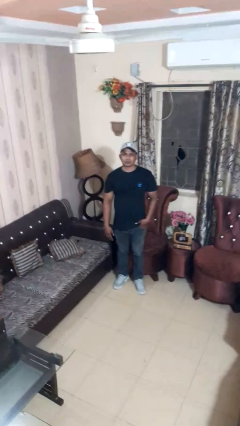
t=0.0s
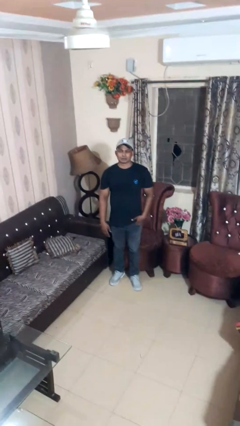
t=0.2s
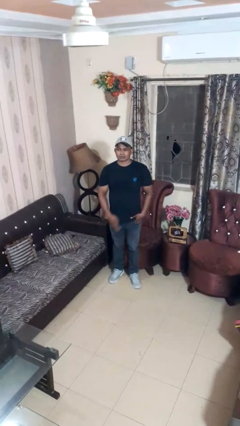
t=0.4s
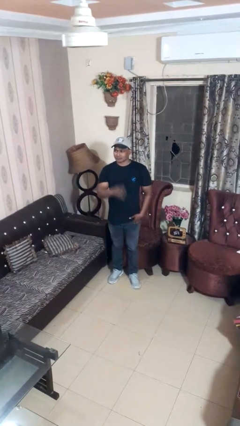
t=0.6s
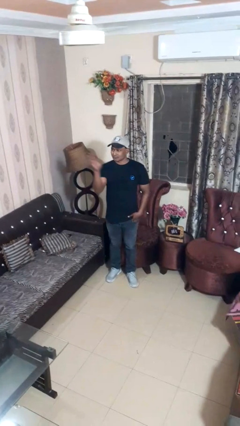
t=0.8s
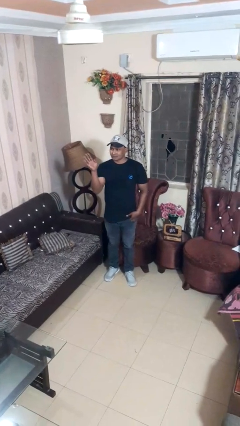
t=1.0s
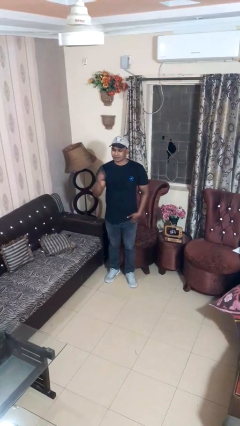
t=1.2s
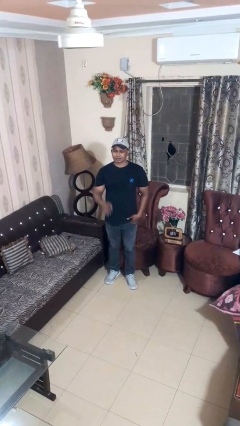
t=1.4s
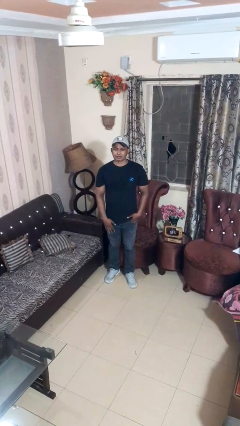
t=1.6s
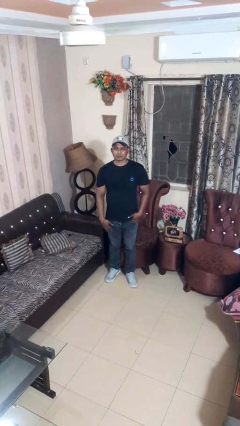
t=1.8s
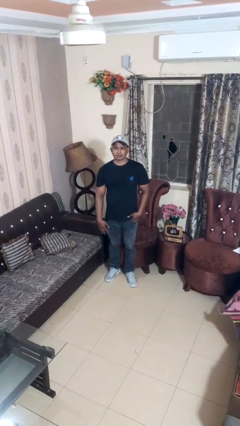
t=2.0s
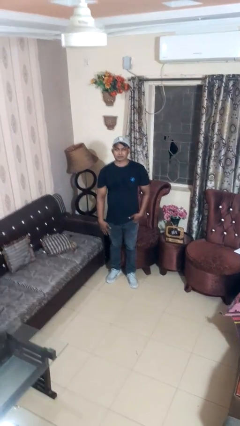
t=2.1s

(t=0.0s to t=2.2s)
person gestures swipe left

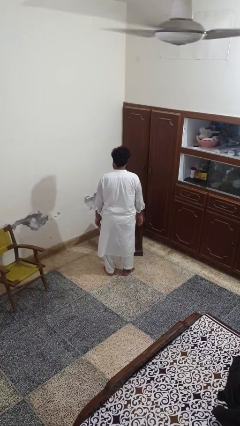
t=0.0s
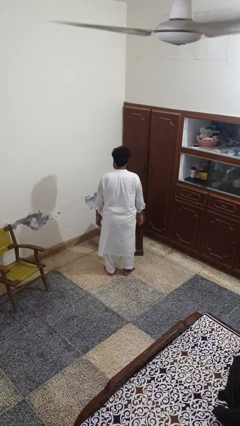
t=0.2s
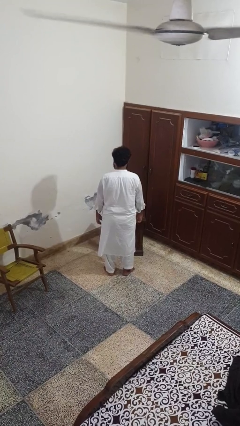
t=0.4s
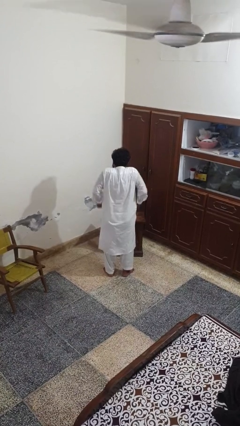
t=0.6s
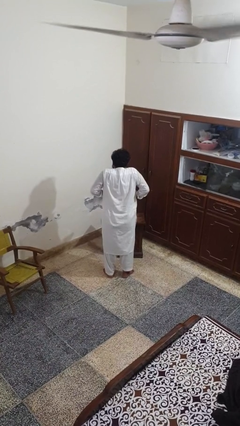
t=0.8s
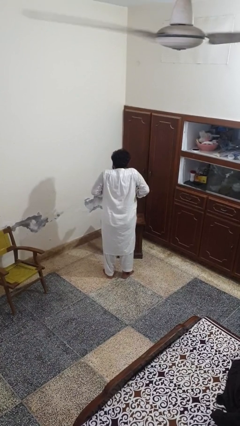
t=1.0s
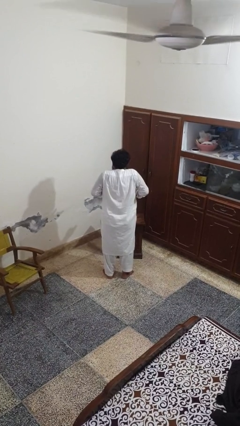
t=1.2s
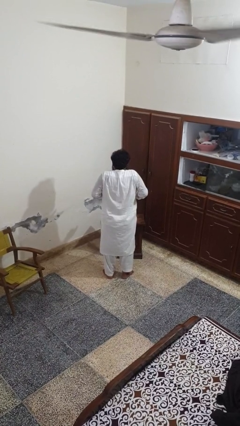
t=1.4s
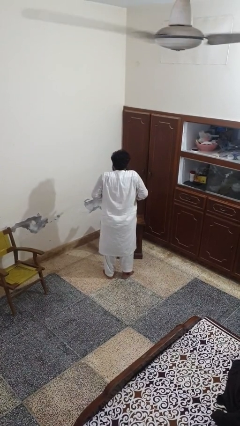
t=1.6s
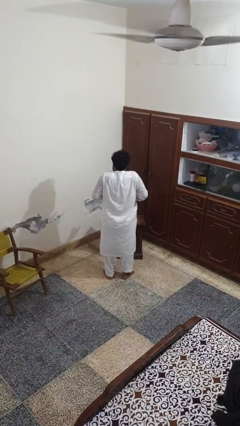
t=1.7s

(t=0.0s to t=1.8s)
person shrugs

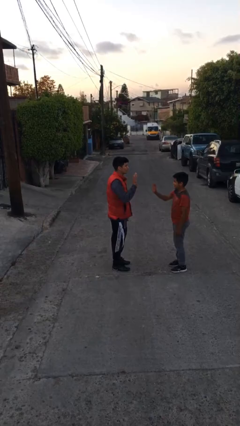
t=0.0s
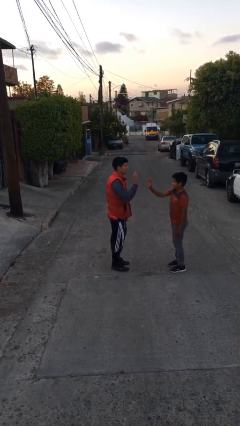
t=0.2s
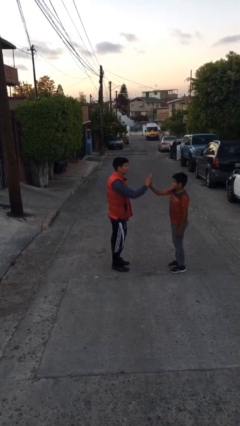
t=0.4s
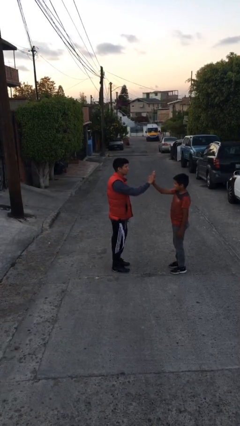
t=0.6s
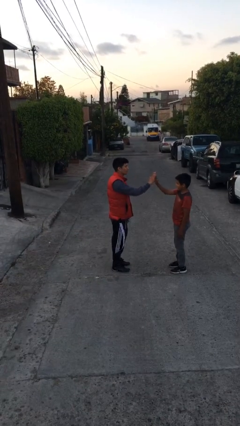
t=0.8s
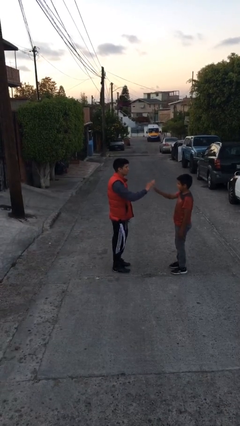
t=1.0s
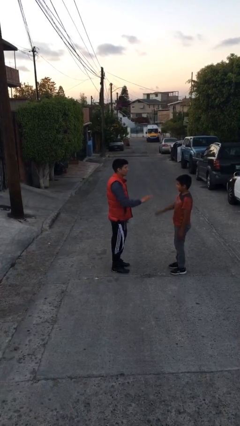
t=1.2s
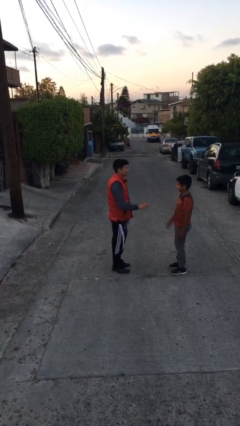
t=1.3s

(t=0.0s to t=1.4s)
person highfives hand

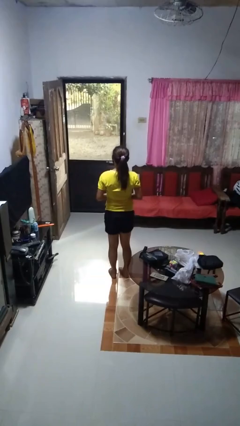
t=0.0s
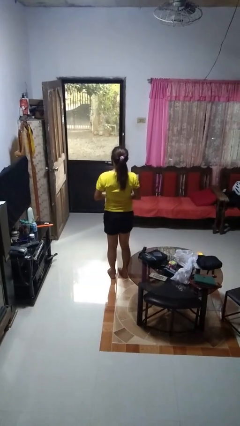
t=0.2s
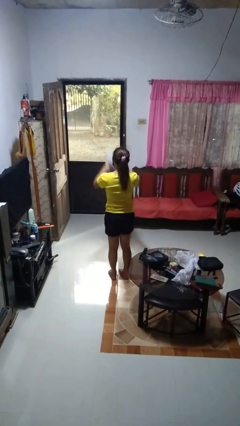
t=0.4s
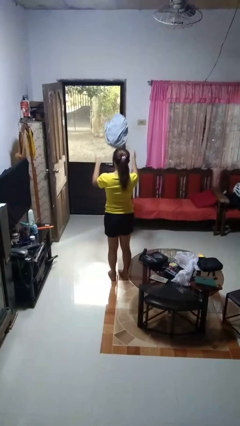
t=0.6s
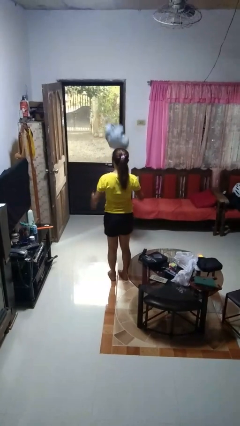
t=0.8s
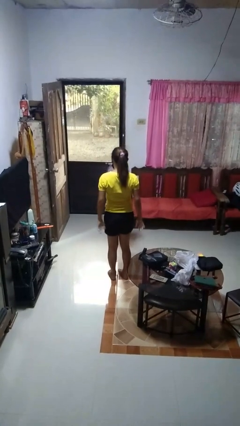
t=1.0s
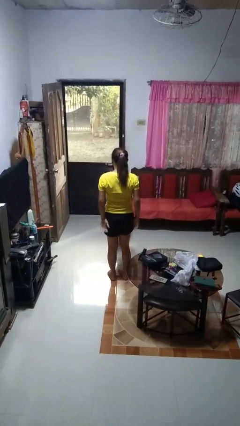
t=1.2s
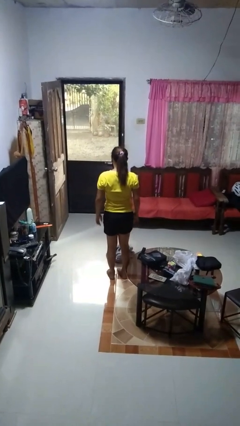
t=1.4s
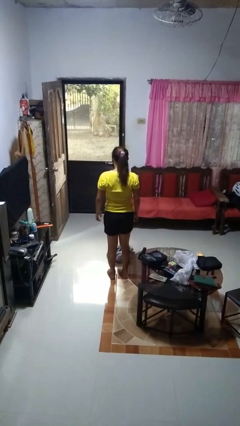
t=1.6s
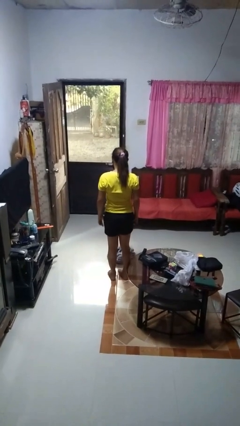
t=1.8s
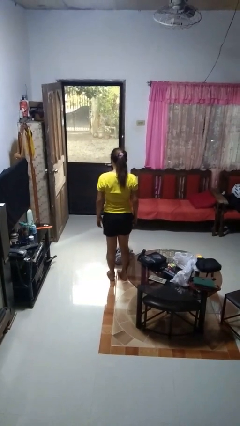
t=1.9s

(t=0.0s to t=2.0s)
person throws object into air

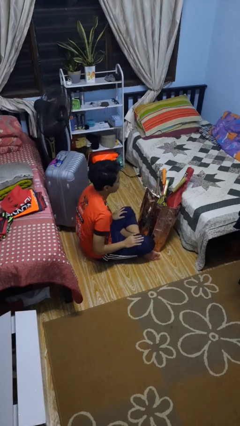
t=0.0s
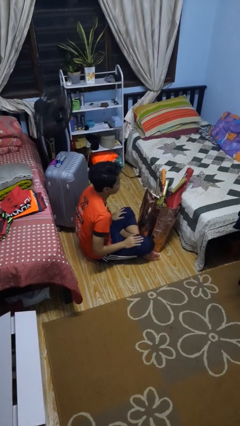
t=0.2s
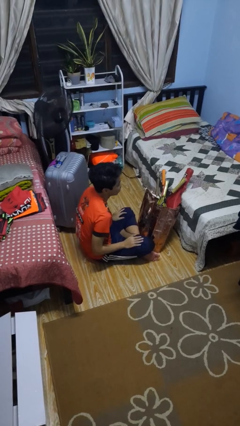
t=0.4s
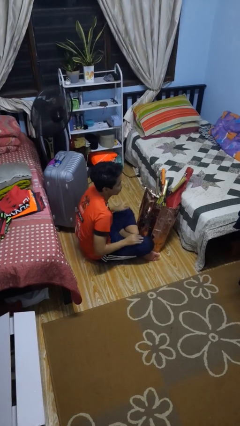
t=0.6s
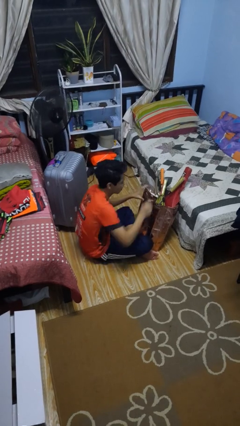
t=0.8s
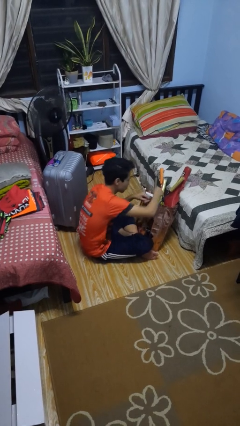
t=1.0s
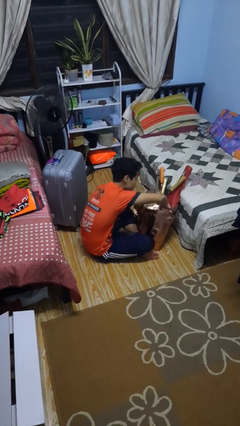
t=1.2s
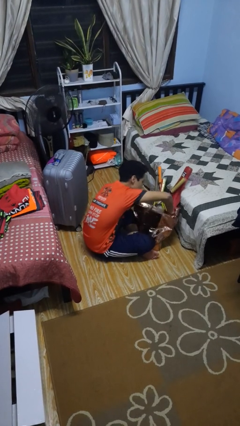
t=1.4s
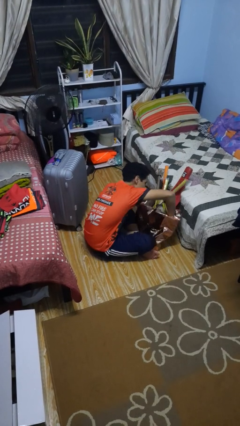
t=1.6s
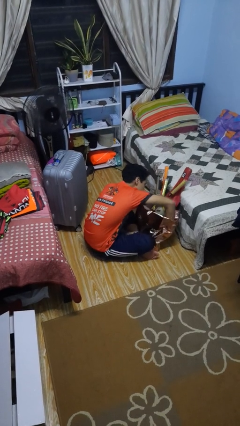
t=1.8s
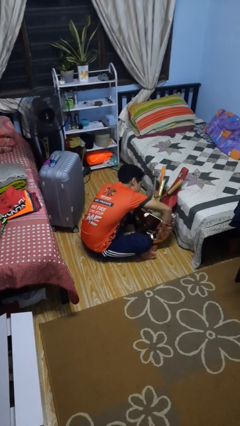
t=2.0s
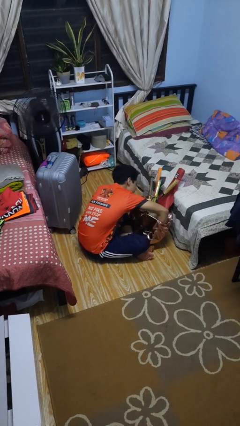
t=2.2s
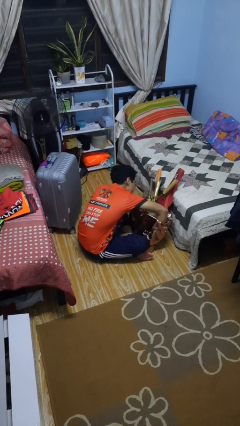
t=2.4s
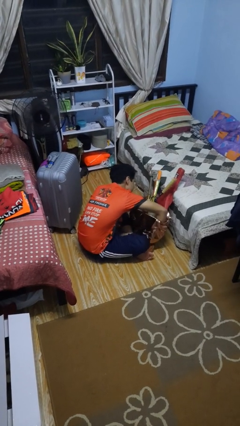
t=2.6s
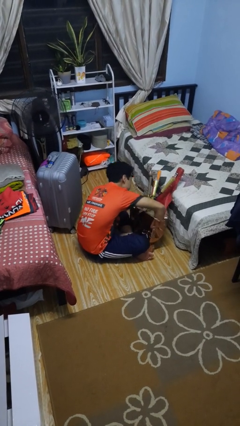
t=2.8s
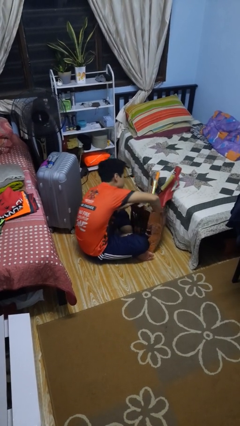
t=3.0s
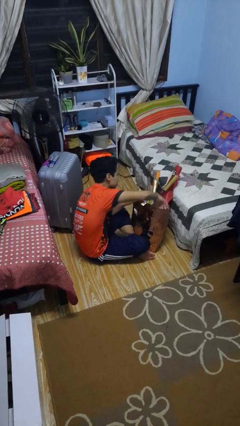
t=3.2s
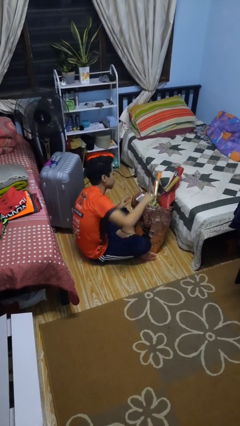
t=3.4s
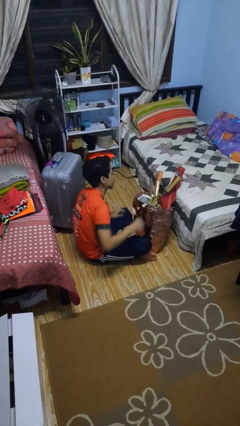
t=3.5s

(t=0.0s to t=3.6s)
person searches in bag

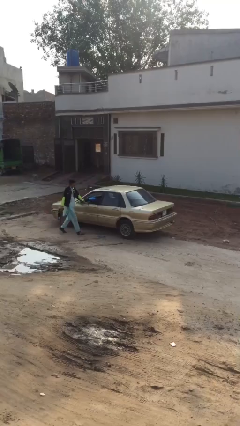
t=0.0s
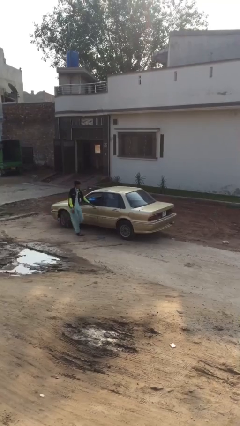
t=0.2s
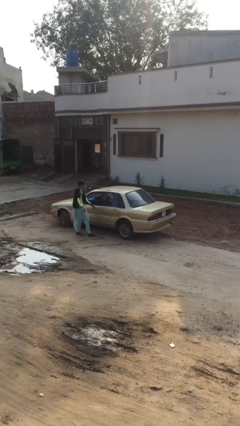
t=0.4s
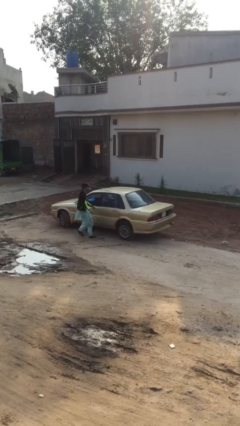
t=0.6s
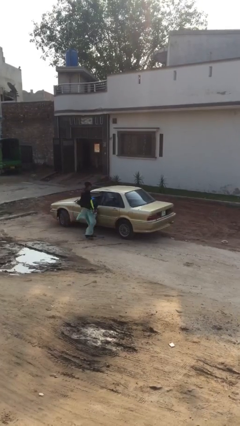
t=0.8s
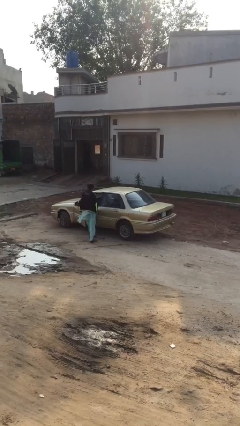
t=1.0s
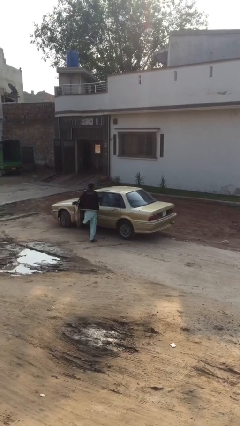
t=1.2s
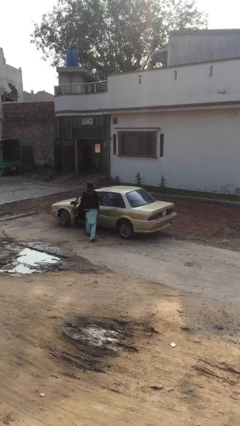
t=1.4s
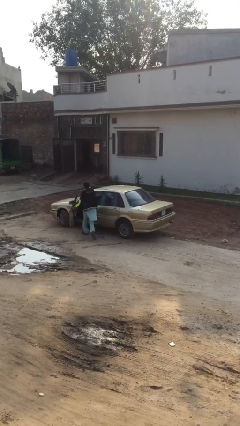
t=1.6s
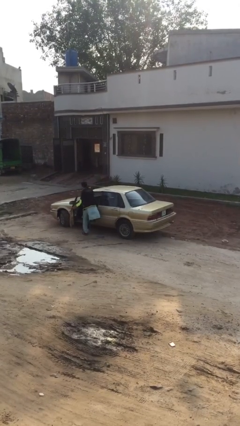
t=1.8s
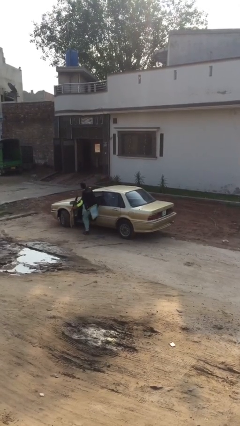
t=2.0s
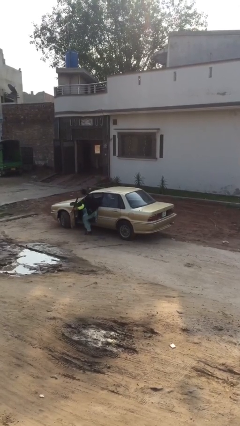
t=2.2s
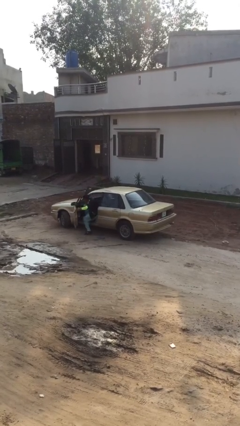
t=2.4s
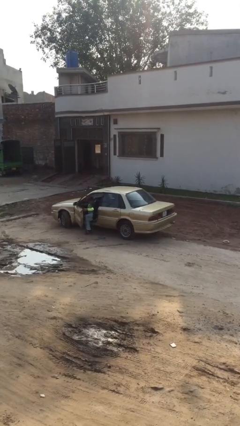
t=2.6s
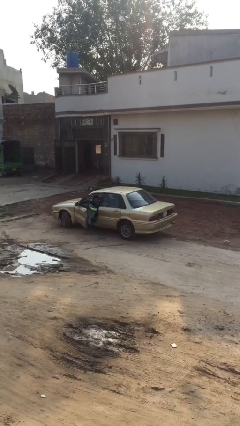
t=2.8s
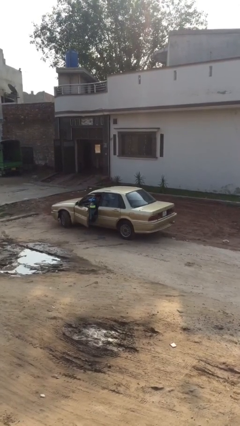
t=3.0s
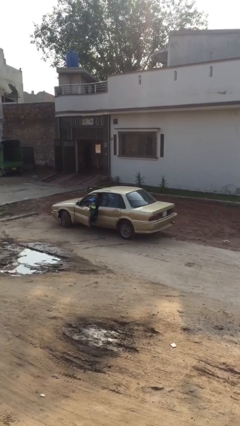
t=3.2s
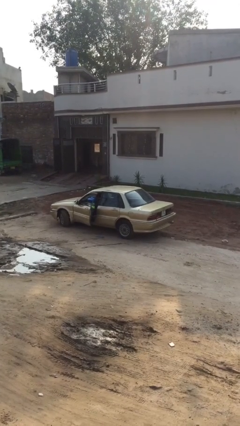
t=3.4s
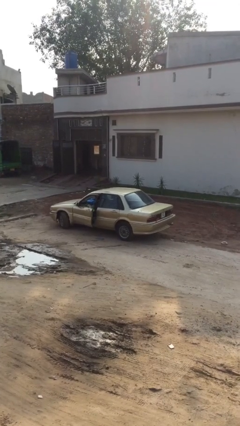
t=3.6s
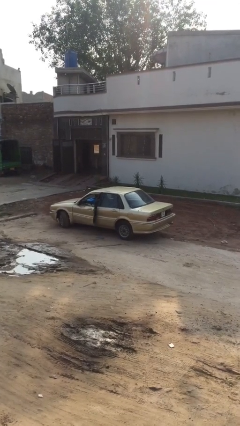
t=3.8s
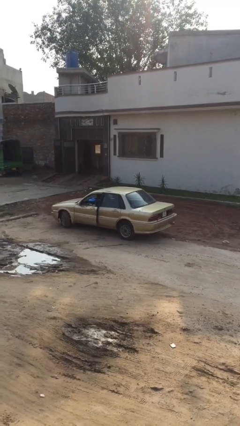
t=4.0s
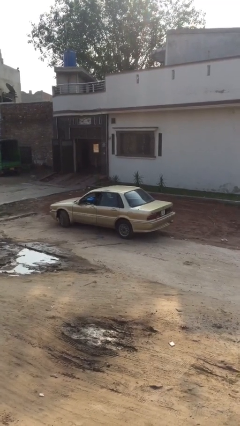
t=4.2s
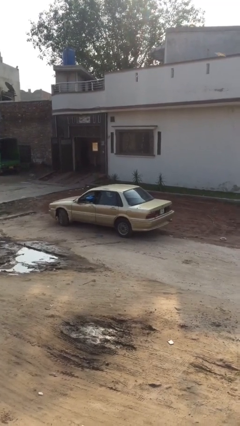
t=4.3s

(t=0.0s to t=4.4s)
car picks up person

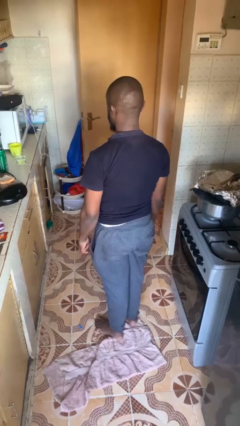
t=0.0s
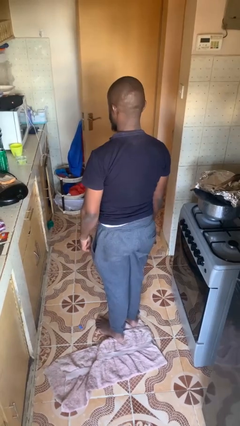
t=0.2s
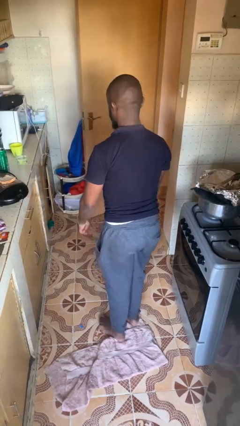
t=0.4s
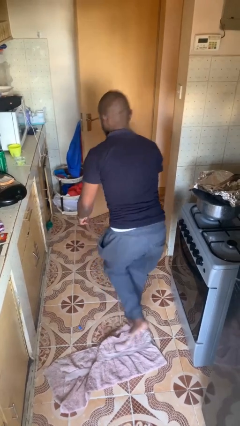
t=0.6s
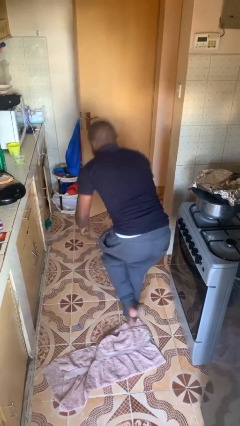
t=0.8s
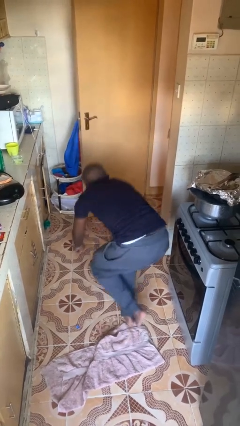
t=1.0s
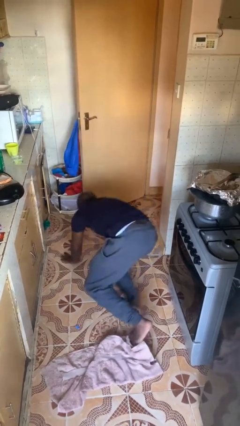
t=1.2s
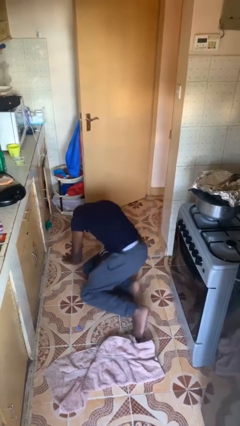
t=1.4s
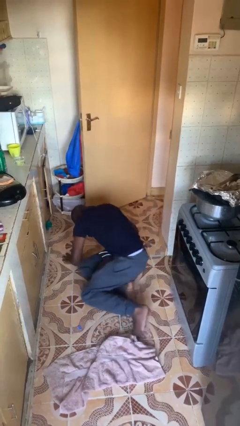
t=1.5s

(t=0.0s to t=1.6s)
person trips on object on floor
